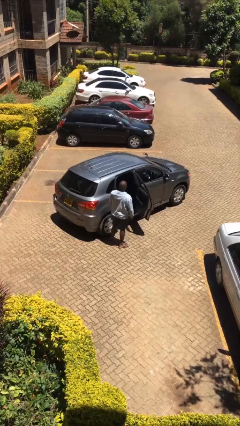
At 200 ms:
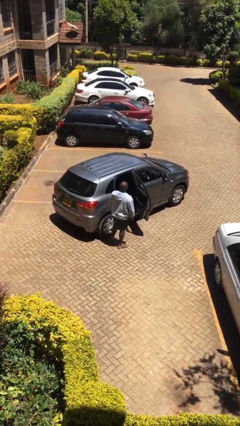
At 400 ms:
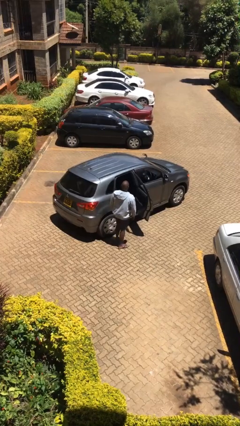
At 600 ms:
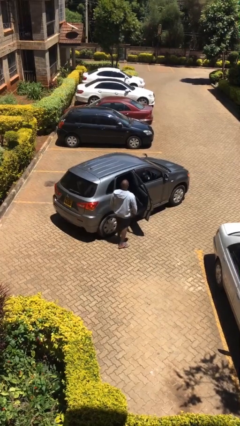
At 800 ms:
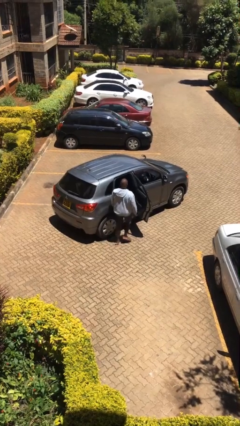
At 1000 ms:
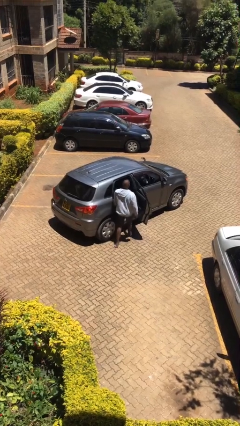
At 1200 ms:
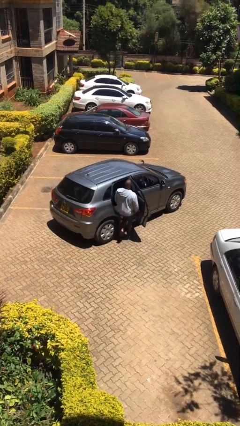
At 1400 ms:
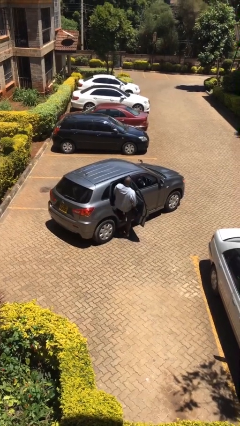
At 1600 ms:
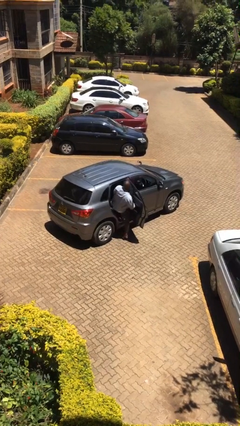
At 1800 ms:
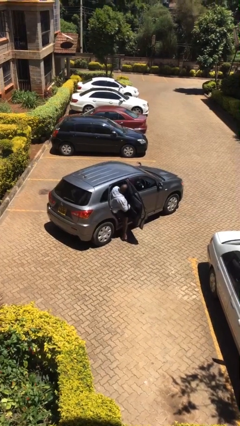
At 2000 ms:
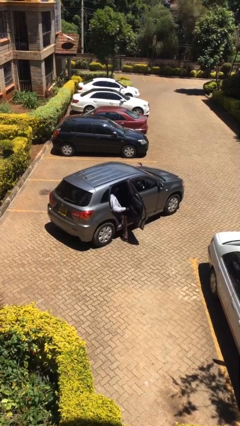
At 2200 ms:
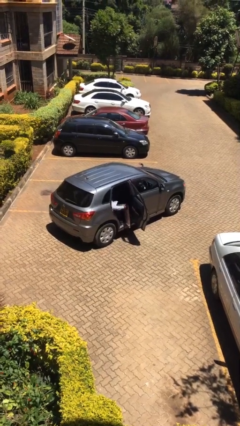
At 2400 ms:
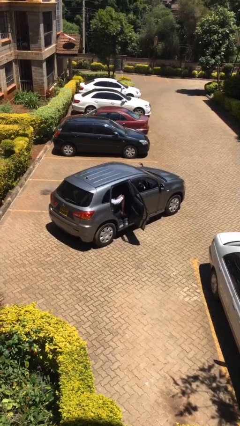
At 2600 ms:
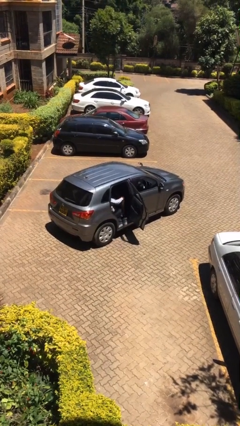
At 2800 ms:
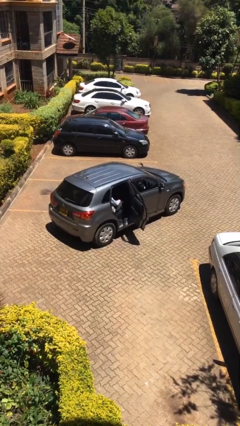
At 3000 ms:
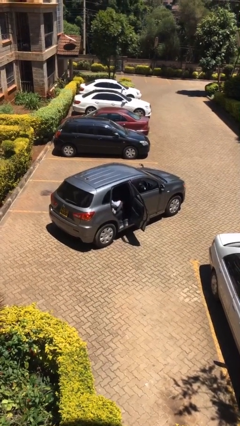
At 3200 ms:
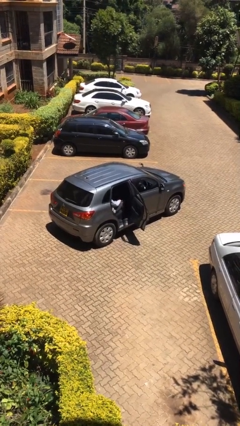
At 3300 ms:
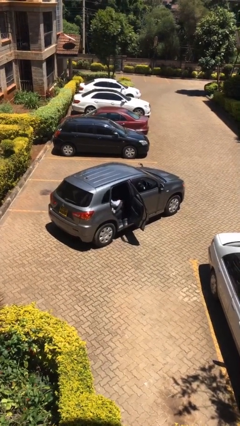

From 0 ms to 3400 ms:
person enters car

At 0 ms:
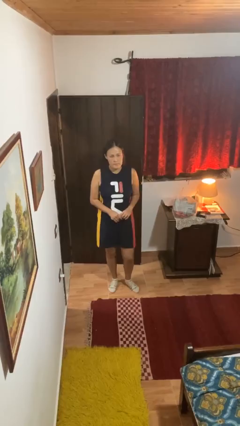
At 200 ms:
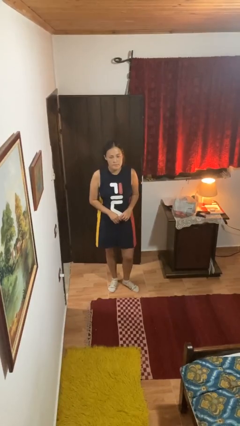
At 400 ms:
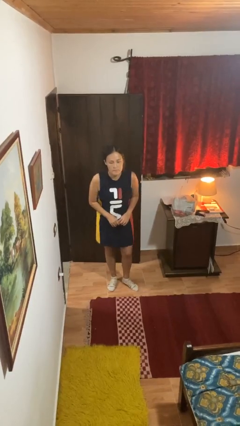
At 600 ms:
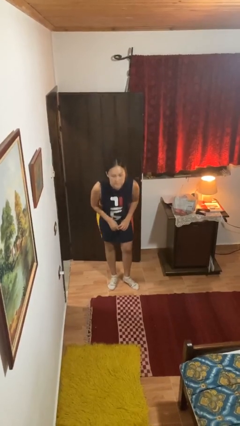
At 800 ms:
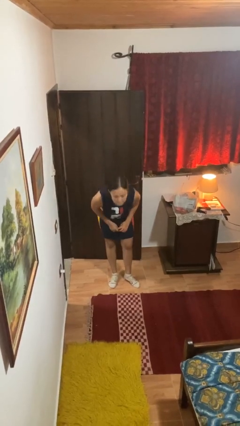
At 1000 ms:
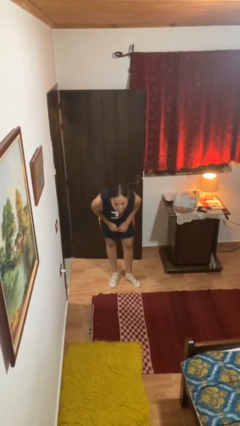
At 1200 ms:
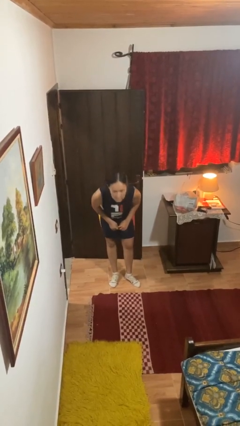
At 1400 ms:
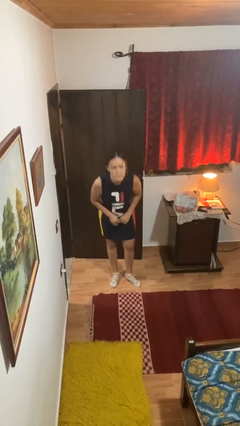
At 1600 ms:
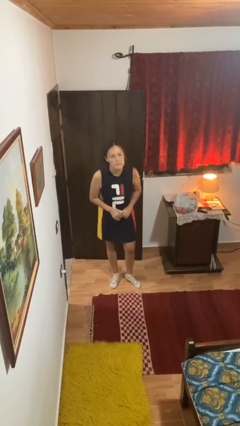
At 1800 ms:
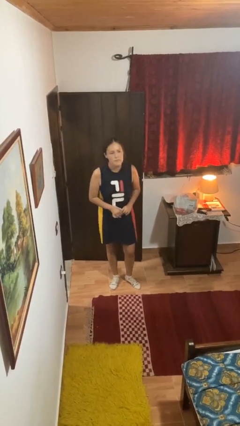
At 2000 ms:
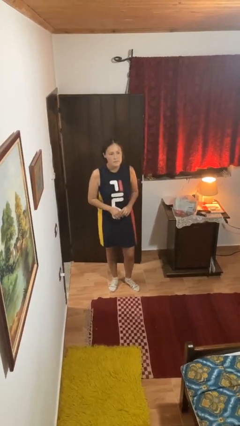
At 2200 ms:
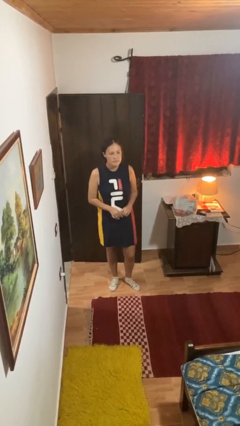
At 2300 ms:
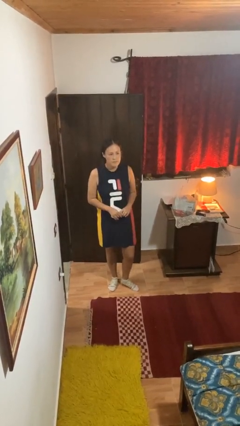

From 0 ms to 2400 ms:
person bows

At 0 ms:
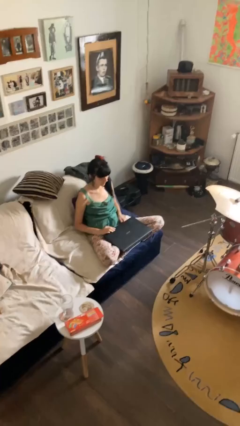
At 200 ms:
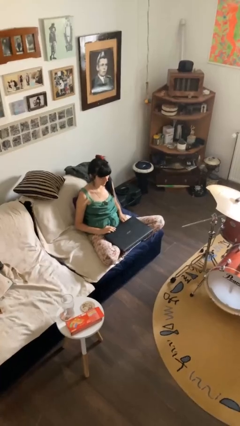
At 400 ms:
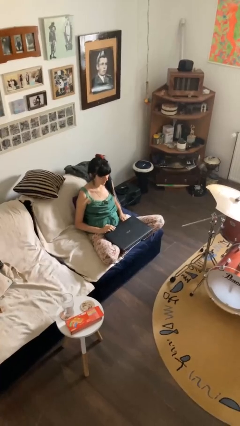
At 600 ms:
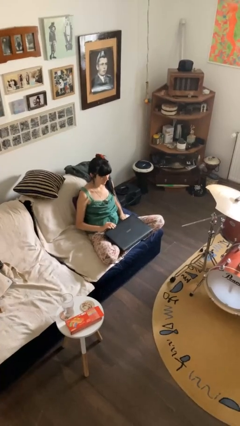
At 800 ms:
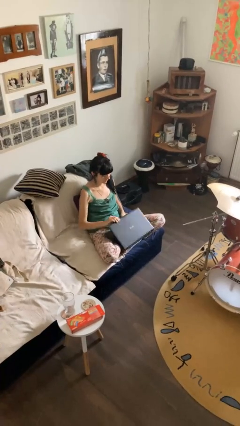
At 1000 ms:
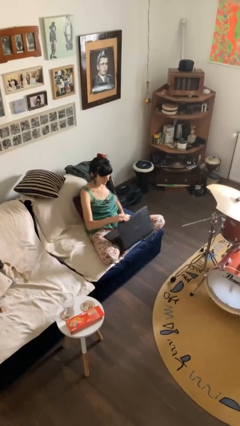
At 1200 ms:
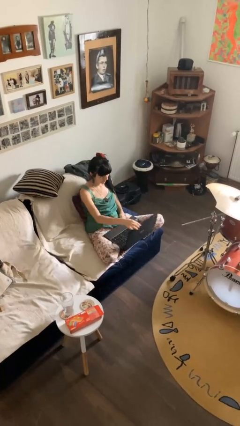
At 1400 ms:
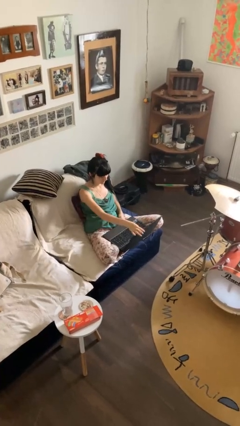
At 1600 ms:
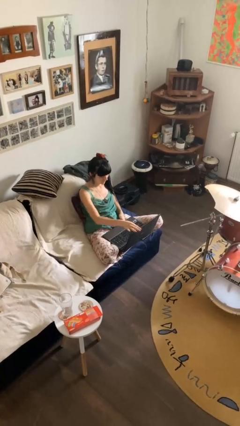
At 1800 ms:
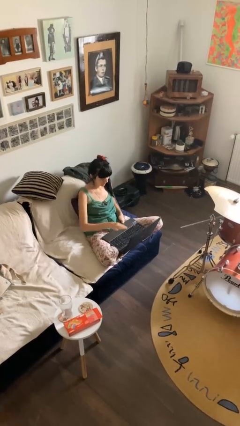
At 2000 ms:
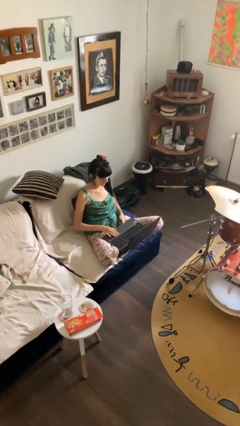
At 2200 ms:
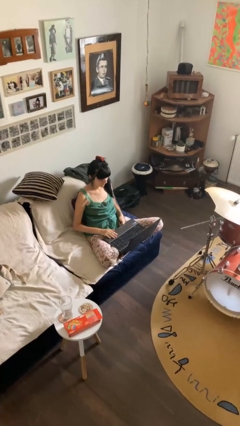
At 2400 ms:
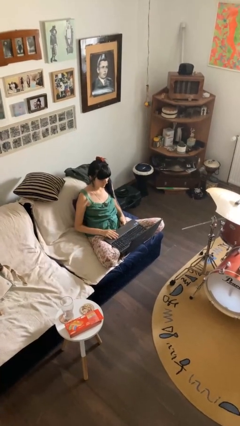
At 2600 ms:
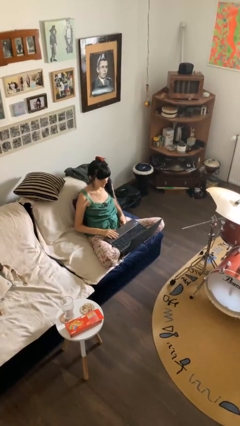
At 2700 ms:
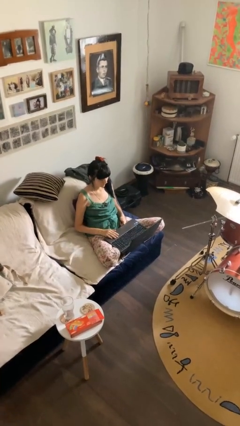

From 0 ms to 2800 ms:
person opens laptop

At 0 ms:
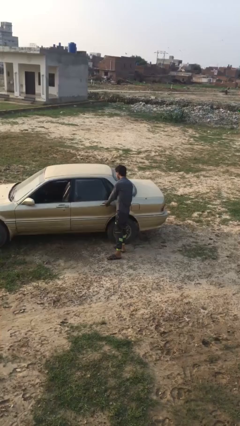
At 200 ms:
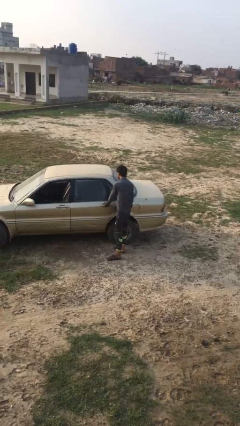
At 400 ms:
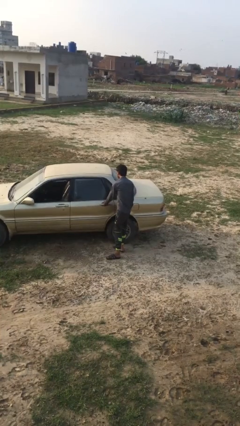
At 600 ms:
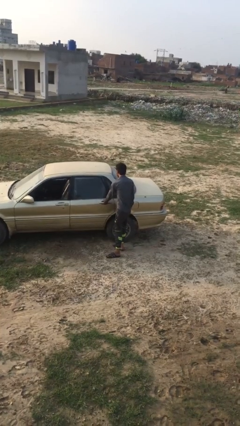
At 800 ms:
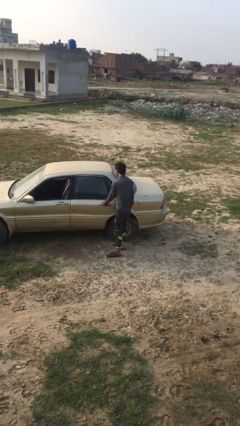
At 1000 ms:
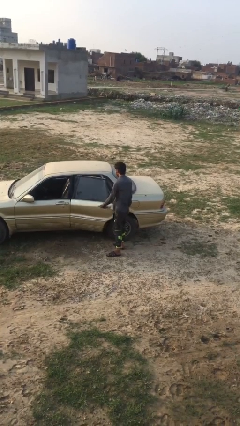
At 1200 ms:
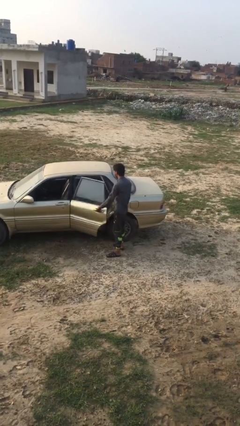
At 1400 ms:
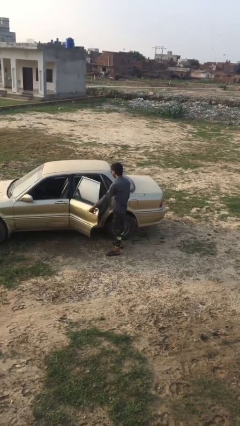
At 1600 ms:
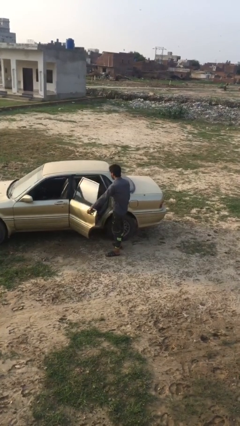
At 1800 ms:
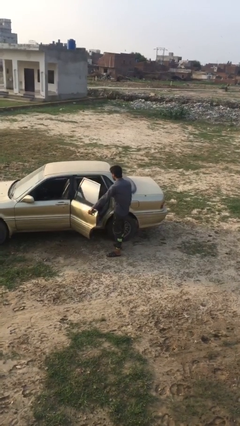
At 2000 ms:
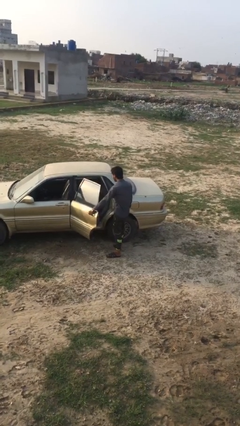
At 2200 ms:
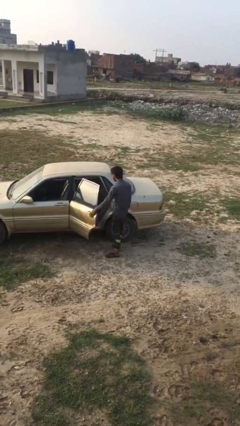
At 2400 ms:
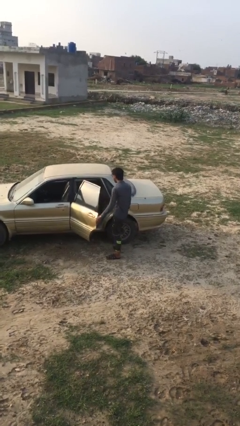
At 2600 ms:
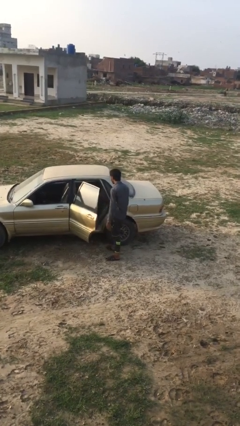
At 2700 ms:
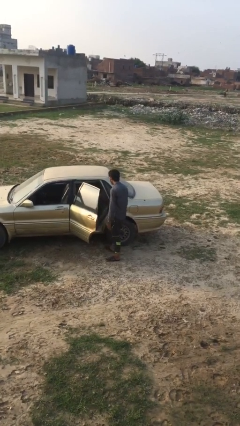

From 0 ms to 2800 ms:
person opens car door

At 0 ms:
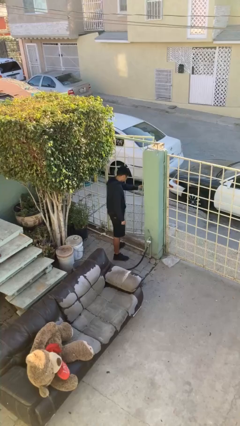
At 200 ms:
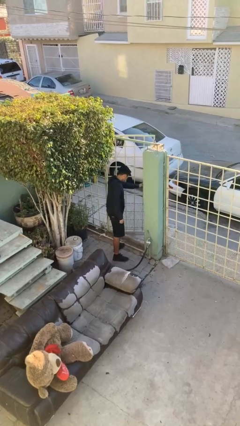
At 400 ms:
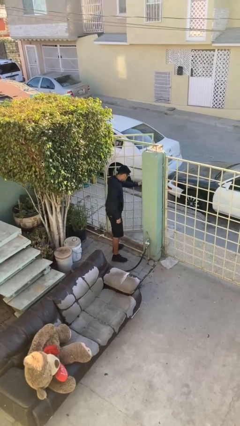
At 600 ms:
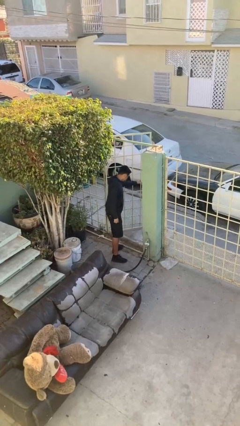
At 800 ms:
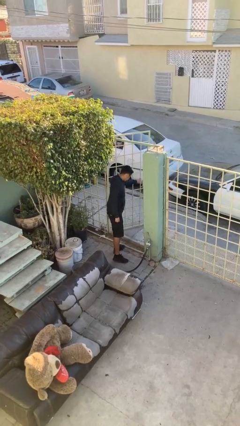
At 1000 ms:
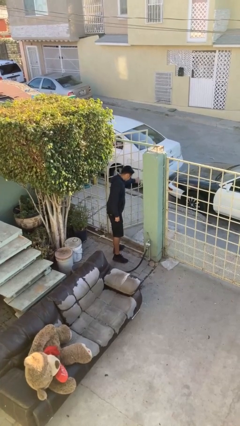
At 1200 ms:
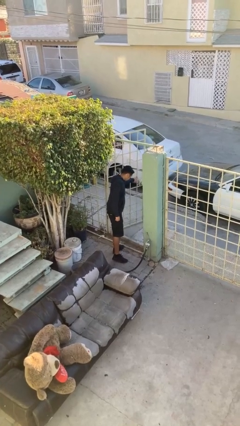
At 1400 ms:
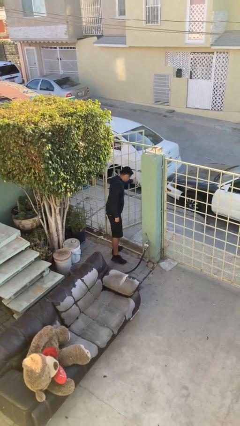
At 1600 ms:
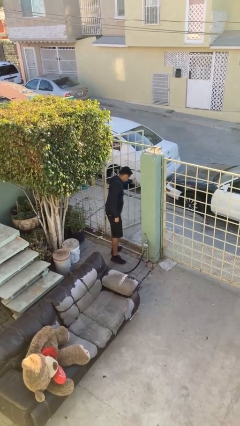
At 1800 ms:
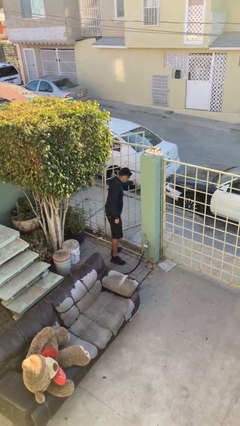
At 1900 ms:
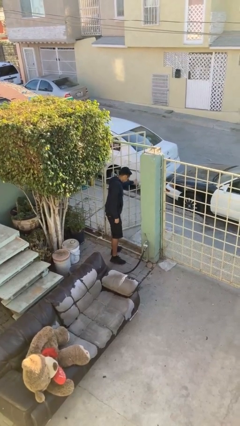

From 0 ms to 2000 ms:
person opens facility door

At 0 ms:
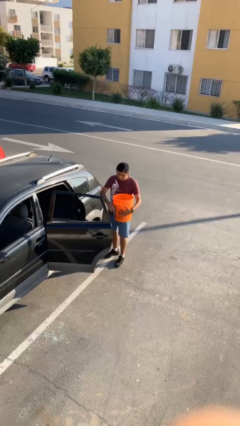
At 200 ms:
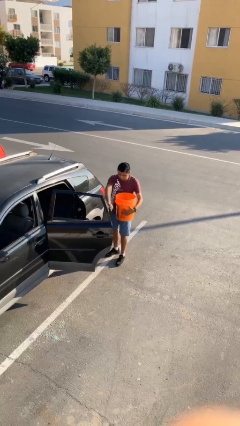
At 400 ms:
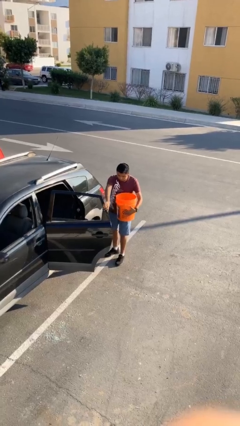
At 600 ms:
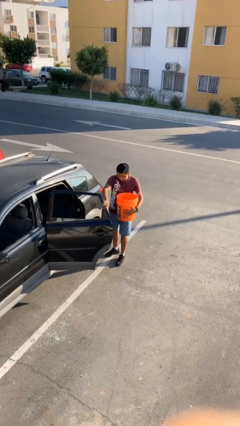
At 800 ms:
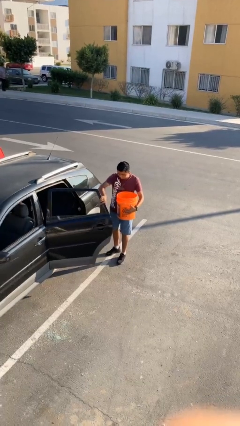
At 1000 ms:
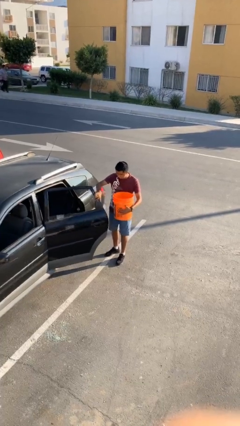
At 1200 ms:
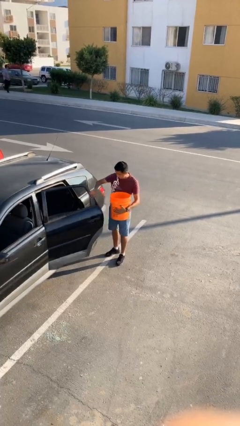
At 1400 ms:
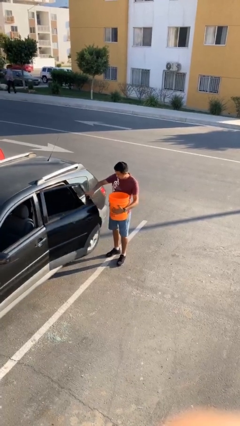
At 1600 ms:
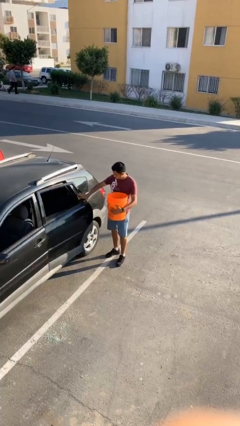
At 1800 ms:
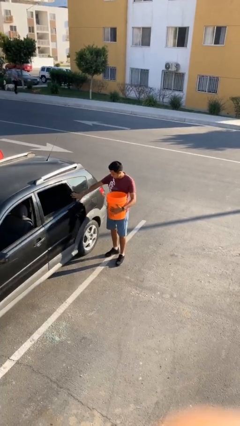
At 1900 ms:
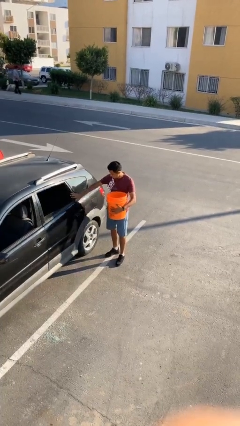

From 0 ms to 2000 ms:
person closes car door

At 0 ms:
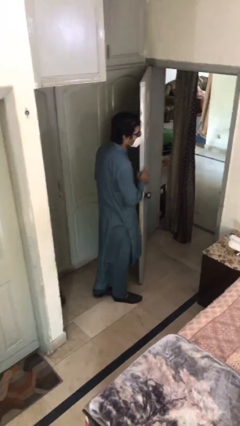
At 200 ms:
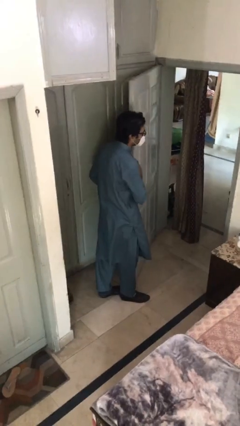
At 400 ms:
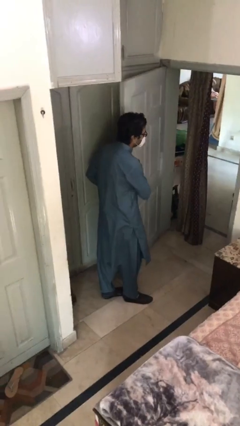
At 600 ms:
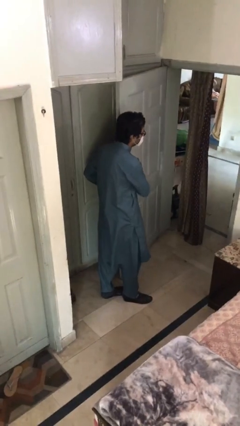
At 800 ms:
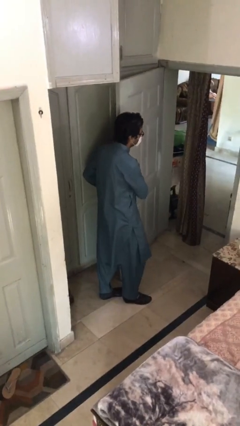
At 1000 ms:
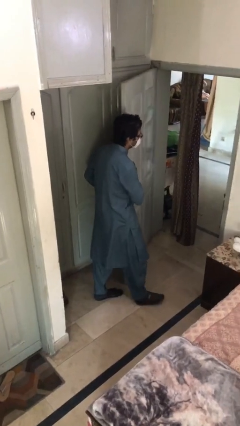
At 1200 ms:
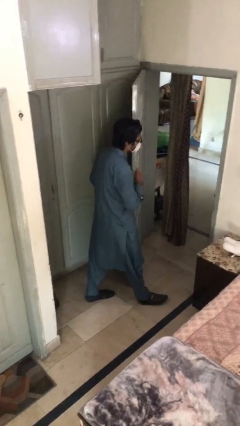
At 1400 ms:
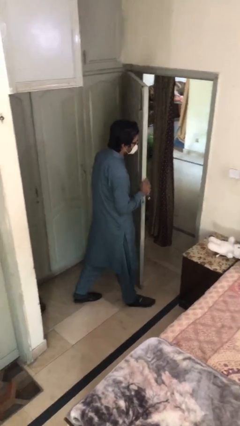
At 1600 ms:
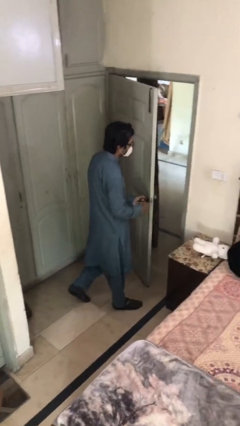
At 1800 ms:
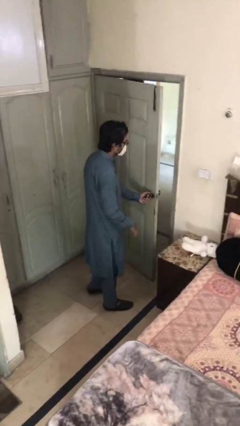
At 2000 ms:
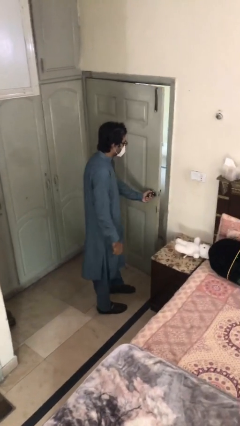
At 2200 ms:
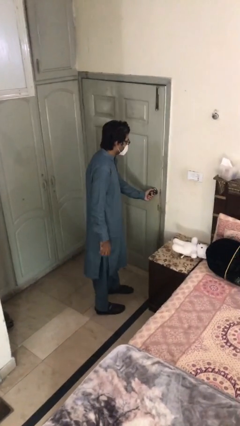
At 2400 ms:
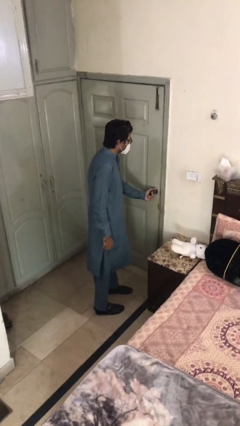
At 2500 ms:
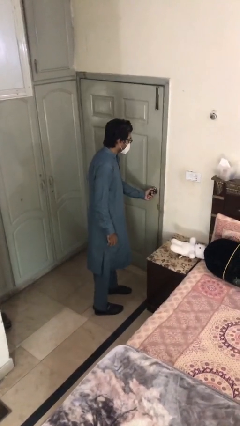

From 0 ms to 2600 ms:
person closes facility door
